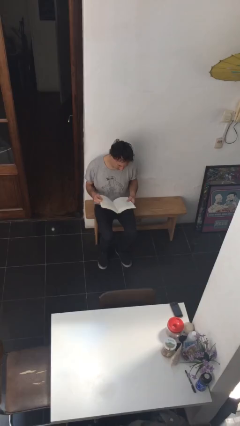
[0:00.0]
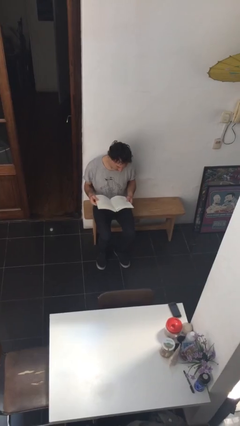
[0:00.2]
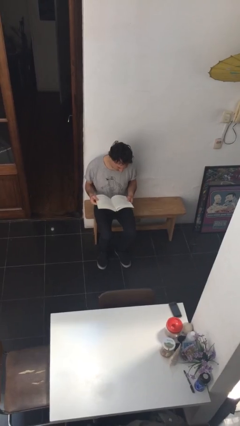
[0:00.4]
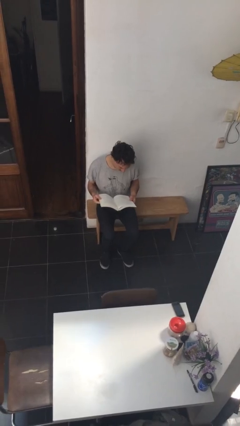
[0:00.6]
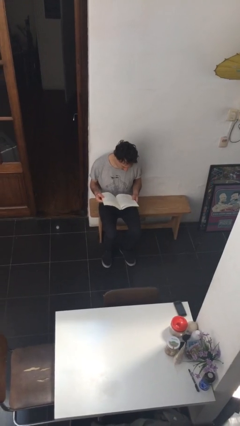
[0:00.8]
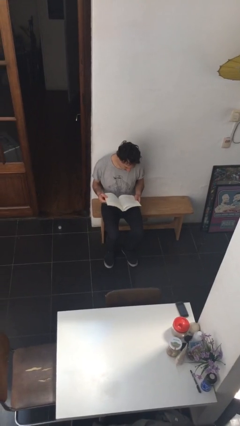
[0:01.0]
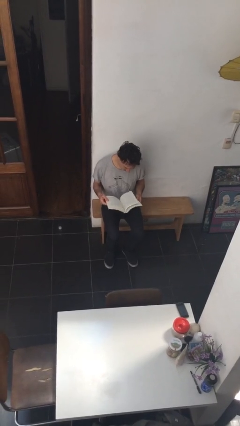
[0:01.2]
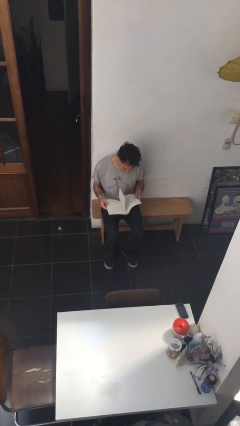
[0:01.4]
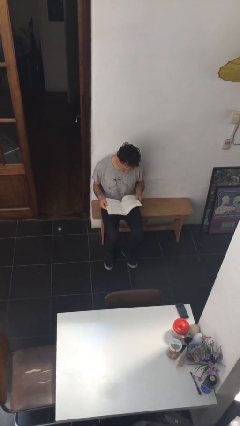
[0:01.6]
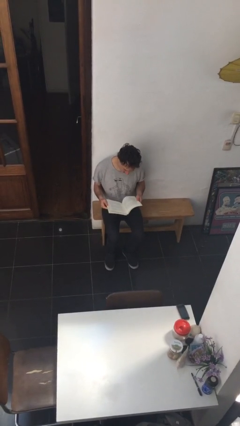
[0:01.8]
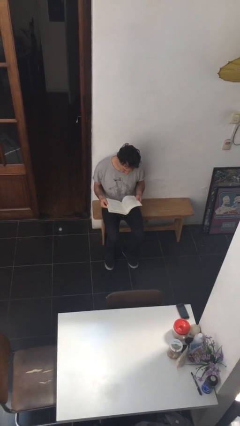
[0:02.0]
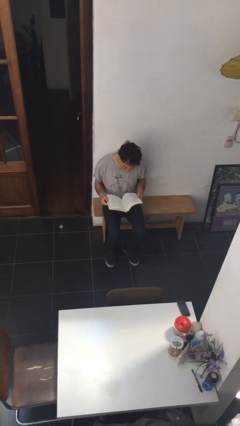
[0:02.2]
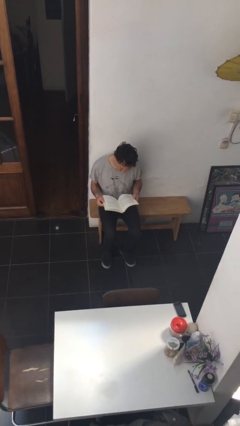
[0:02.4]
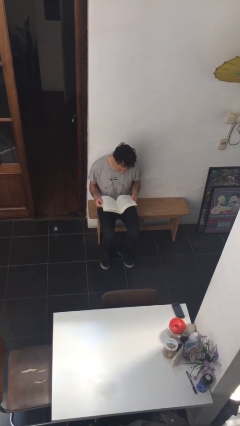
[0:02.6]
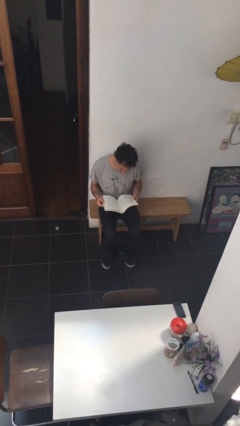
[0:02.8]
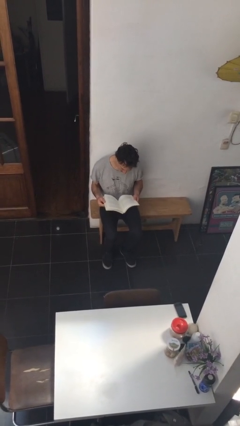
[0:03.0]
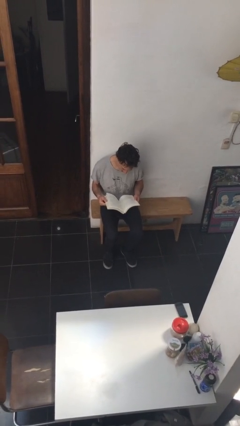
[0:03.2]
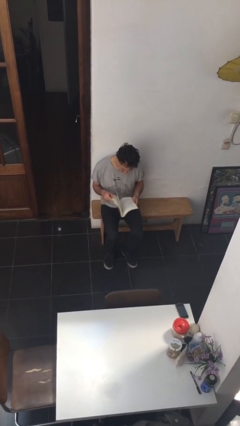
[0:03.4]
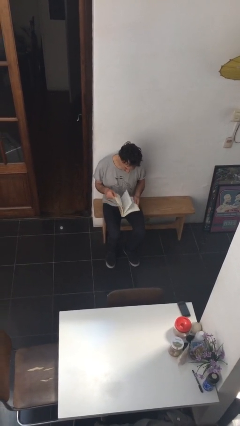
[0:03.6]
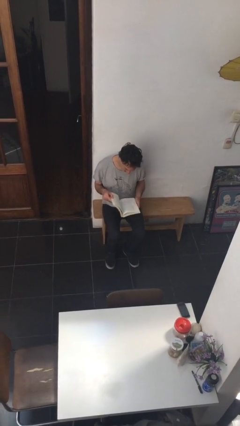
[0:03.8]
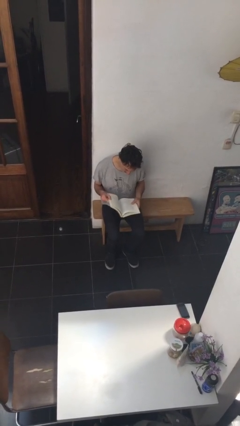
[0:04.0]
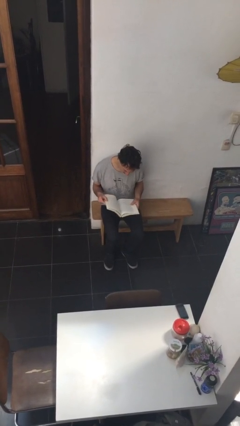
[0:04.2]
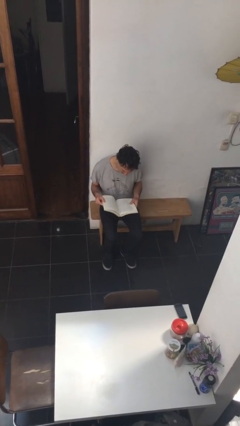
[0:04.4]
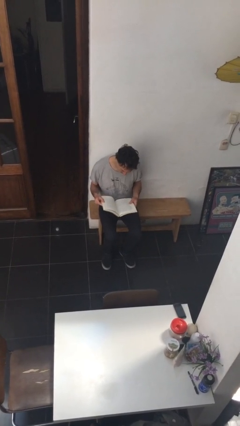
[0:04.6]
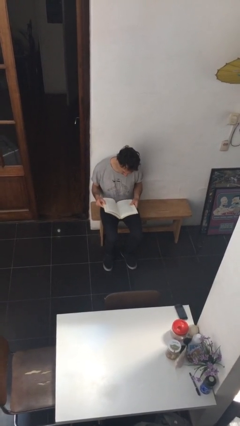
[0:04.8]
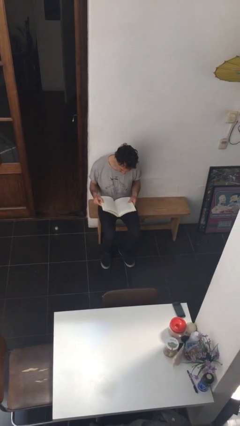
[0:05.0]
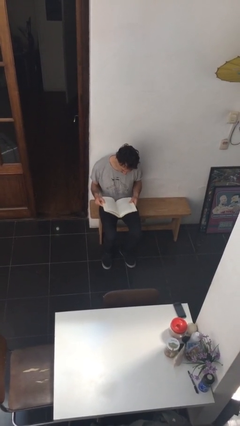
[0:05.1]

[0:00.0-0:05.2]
person reads document

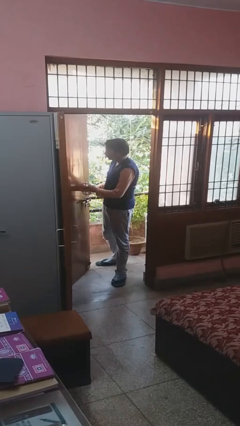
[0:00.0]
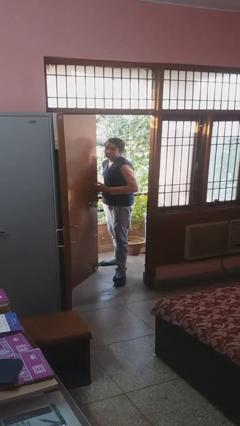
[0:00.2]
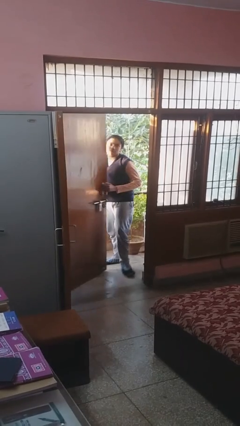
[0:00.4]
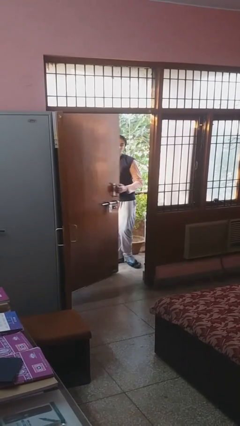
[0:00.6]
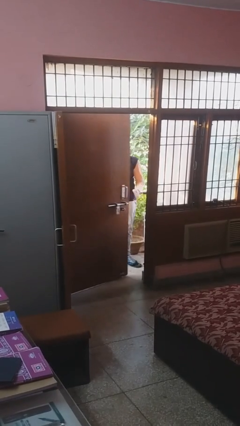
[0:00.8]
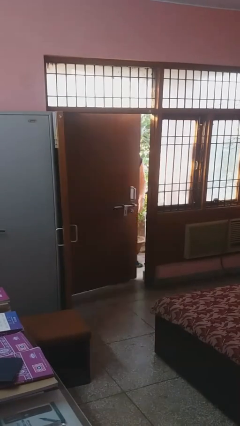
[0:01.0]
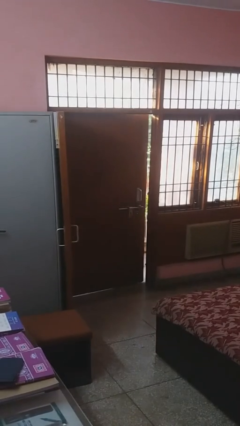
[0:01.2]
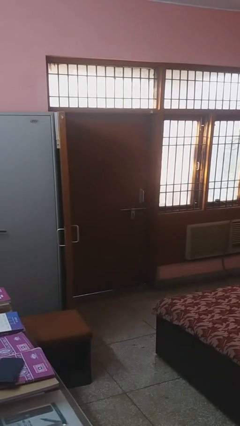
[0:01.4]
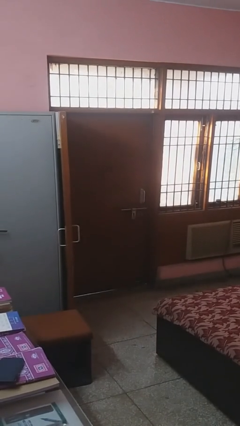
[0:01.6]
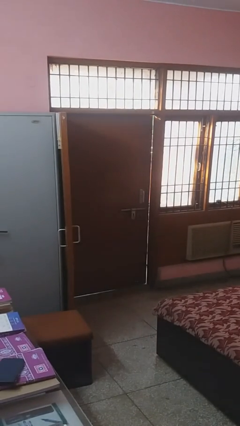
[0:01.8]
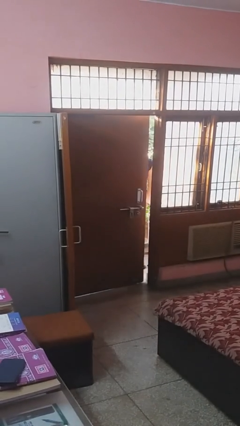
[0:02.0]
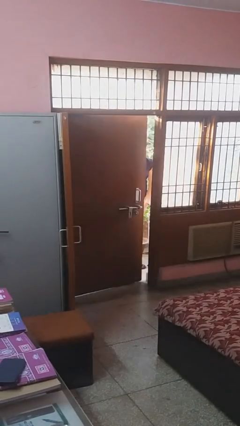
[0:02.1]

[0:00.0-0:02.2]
person closes facility door

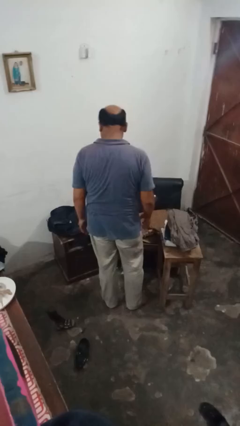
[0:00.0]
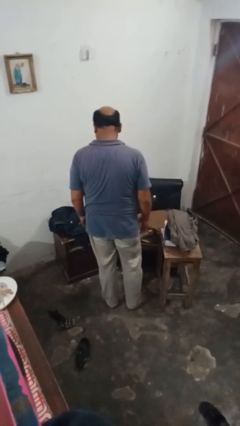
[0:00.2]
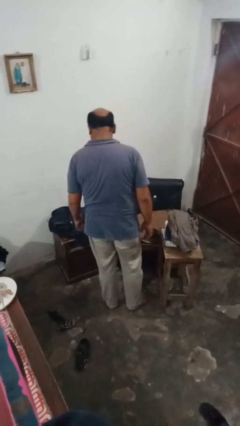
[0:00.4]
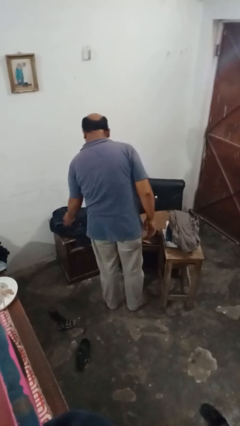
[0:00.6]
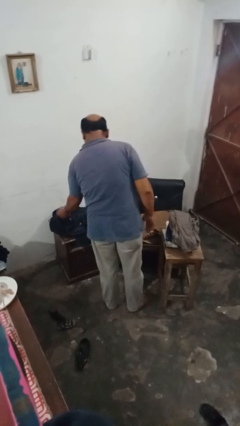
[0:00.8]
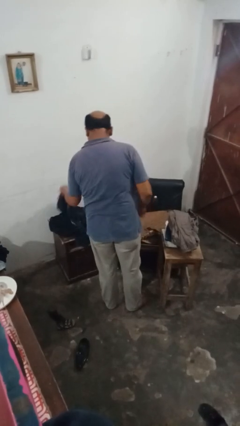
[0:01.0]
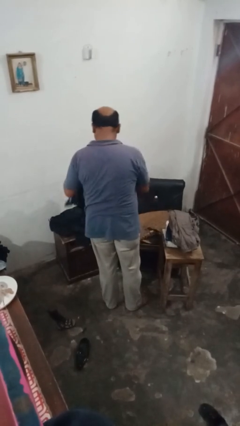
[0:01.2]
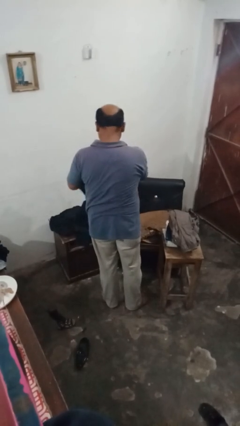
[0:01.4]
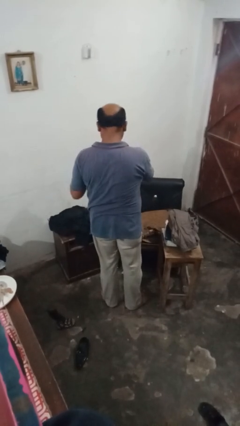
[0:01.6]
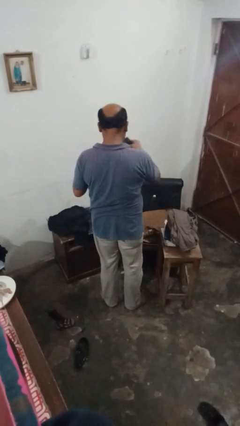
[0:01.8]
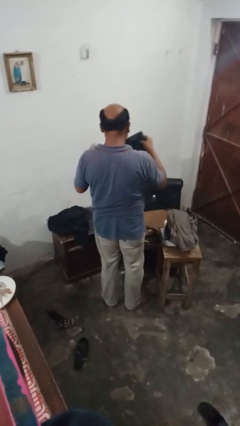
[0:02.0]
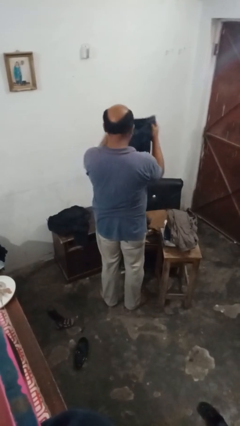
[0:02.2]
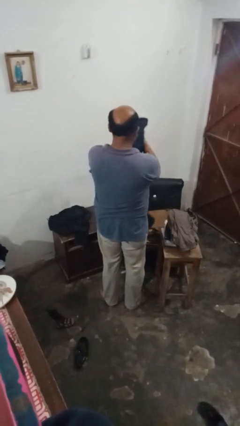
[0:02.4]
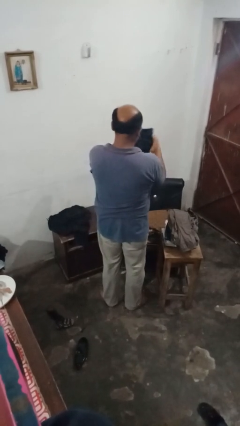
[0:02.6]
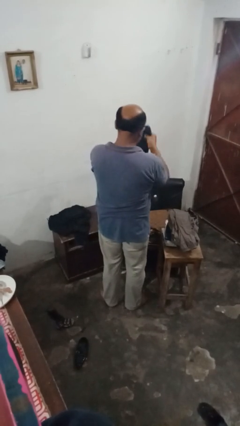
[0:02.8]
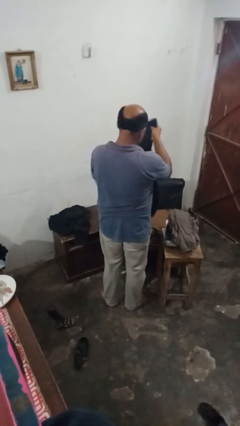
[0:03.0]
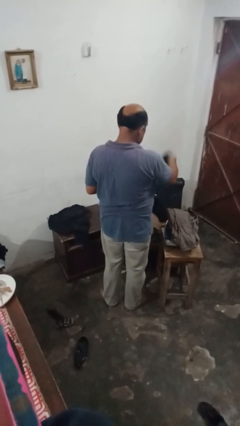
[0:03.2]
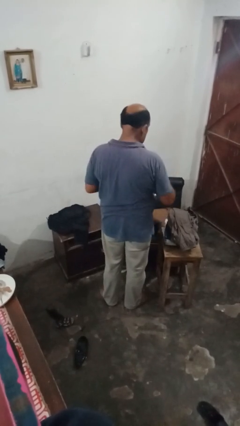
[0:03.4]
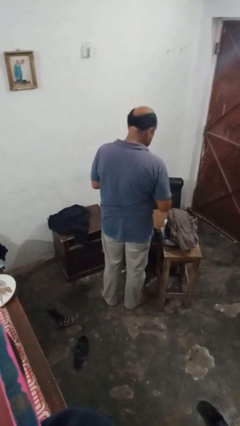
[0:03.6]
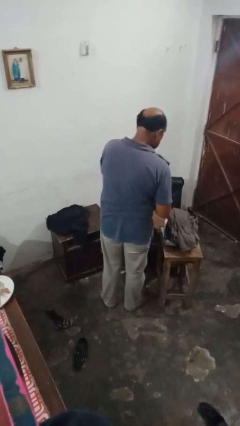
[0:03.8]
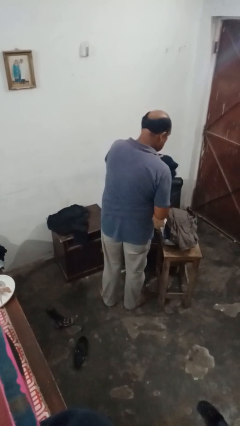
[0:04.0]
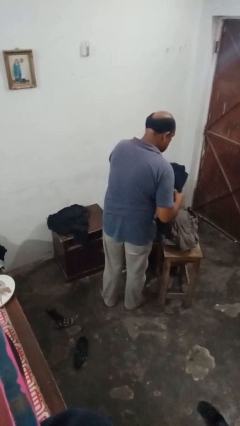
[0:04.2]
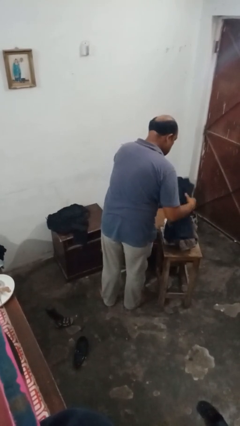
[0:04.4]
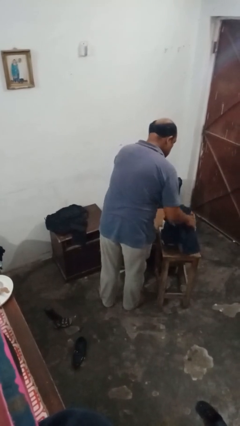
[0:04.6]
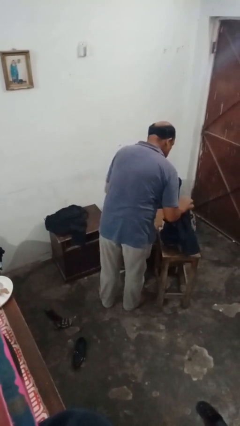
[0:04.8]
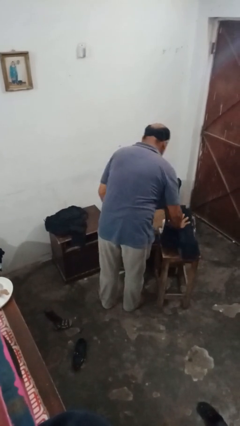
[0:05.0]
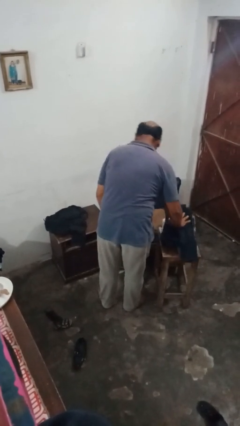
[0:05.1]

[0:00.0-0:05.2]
person folds pants

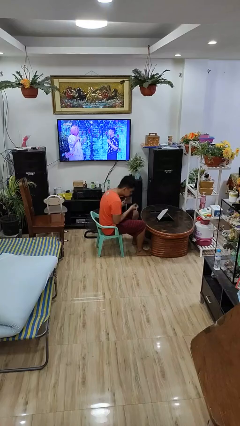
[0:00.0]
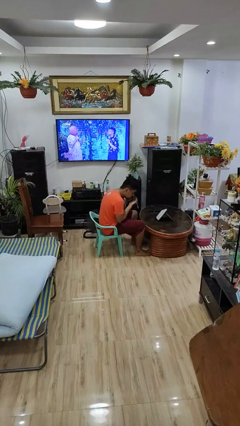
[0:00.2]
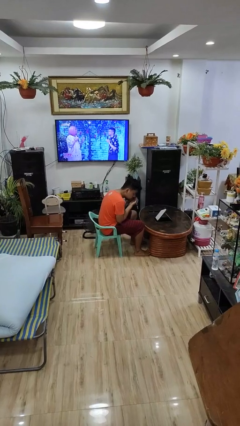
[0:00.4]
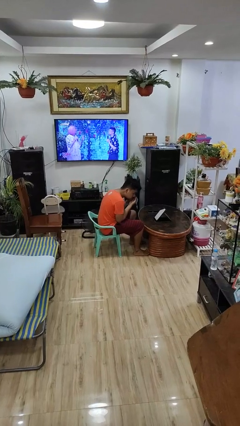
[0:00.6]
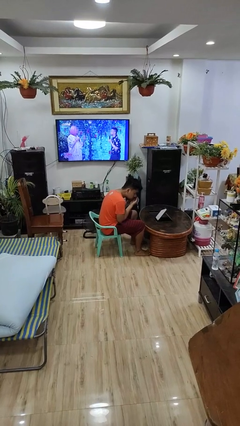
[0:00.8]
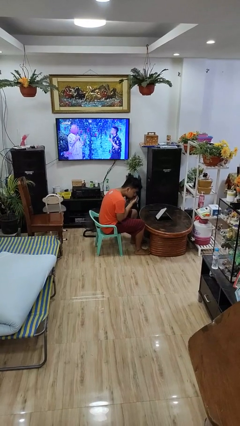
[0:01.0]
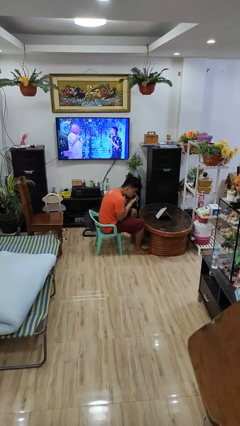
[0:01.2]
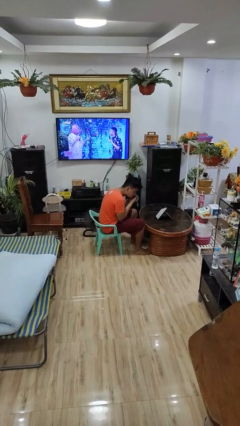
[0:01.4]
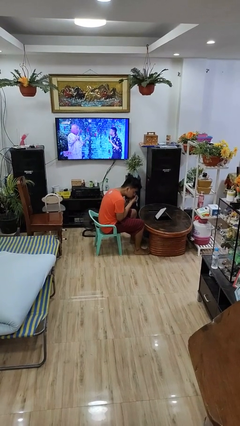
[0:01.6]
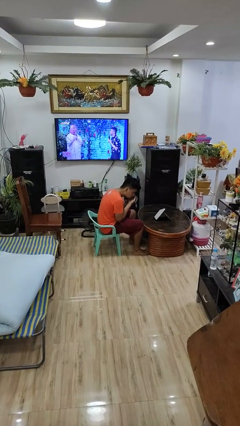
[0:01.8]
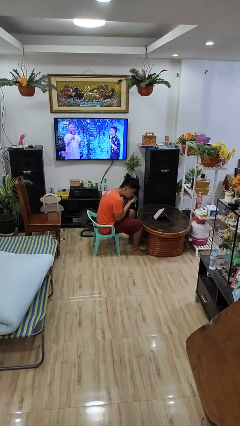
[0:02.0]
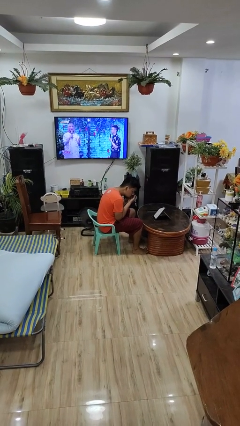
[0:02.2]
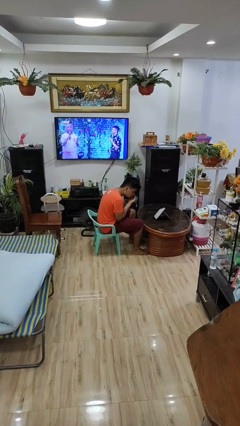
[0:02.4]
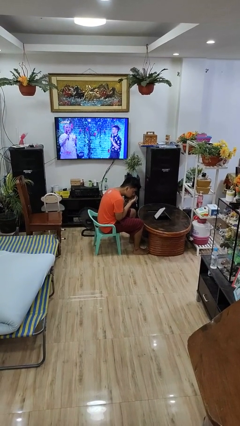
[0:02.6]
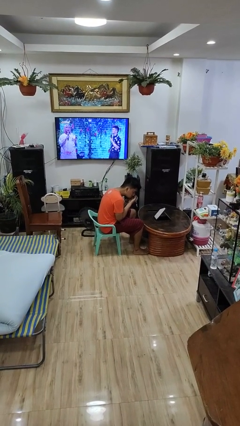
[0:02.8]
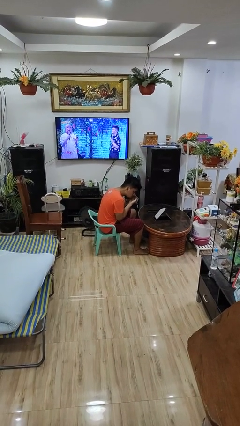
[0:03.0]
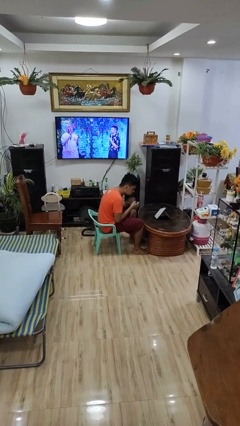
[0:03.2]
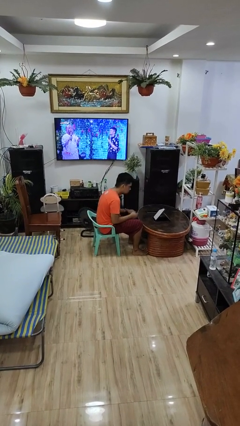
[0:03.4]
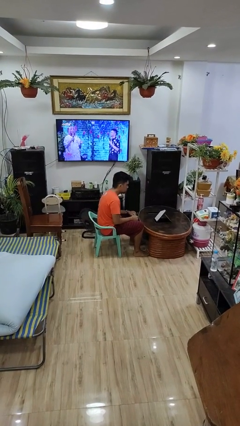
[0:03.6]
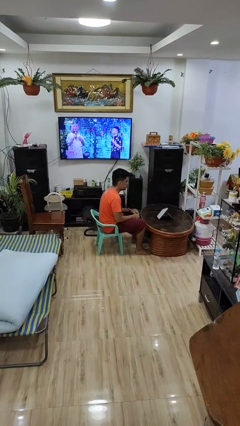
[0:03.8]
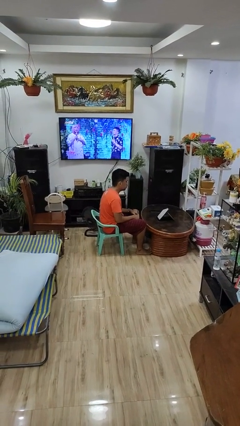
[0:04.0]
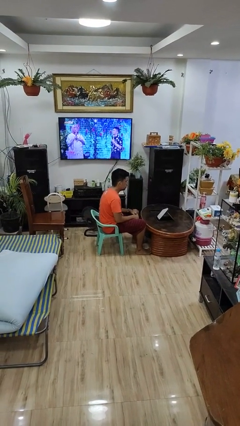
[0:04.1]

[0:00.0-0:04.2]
person applies eye makeup

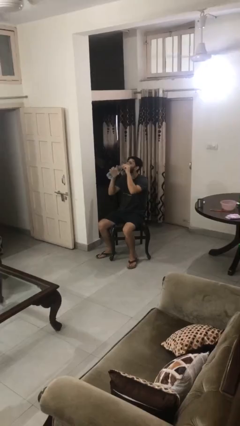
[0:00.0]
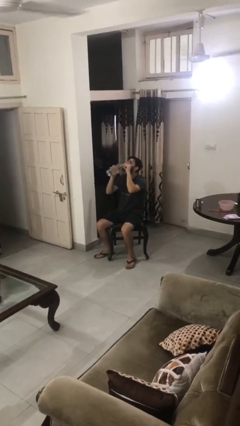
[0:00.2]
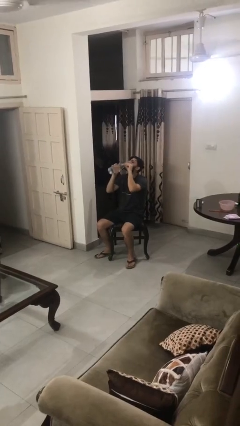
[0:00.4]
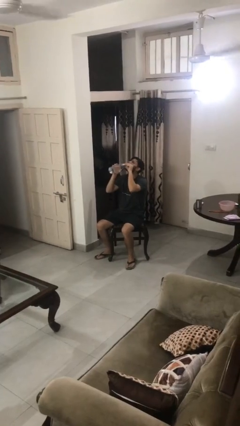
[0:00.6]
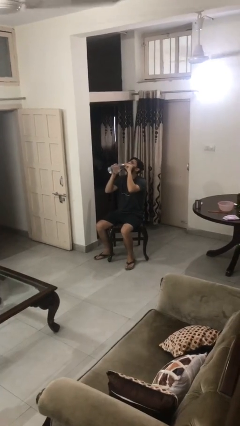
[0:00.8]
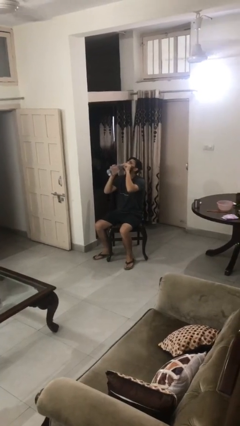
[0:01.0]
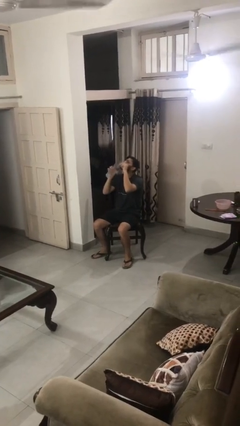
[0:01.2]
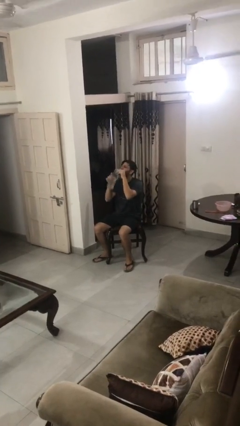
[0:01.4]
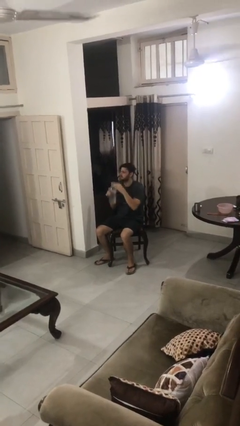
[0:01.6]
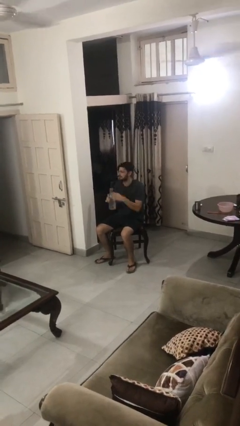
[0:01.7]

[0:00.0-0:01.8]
person drinks from bottle
